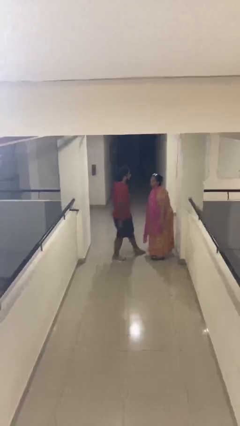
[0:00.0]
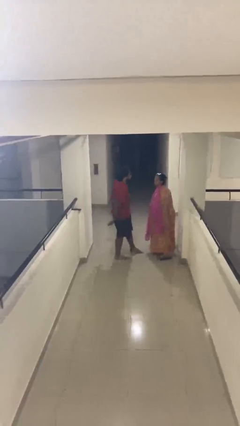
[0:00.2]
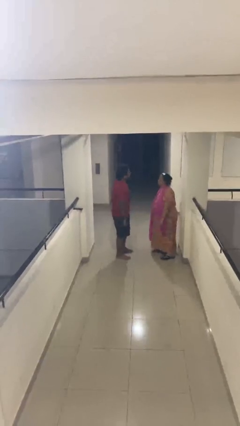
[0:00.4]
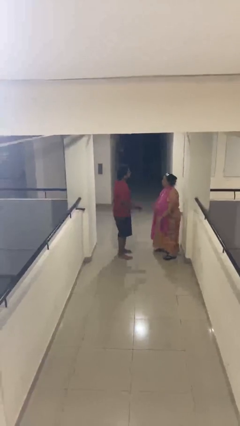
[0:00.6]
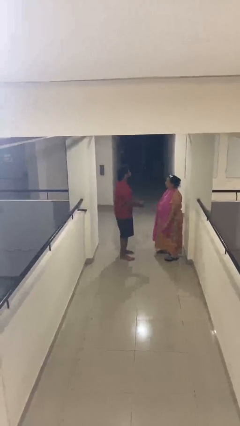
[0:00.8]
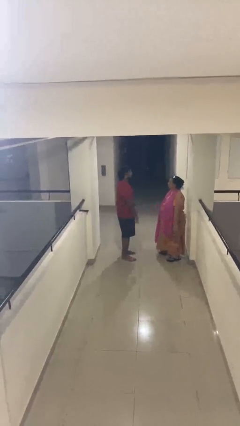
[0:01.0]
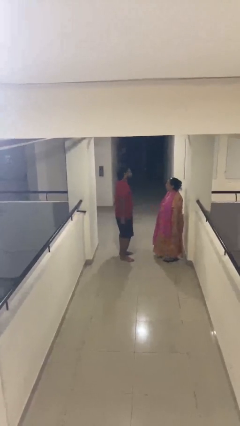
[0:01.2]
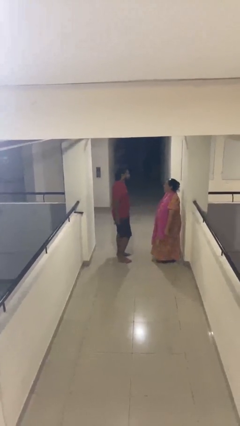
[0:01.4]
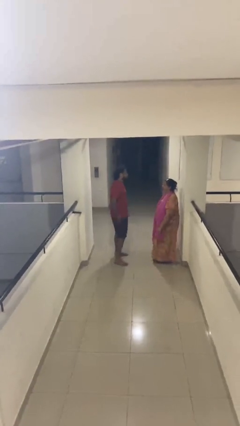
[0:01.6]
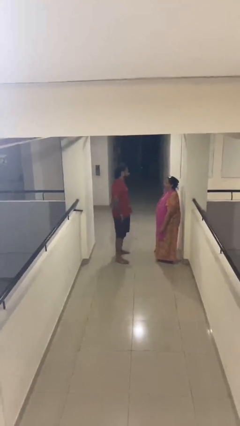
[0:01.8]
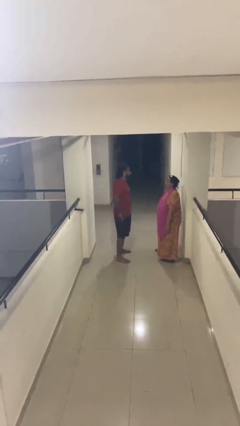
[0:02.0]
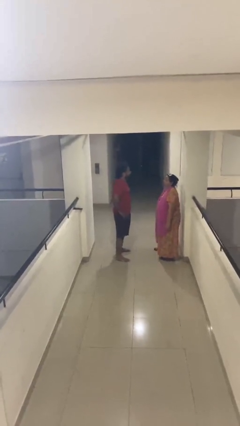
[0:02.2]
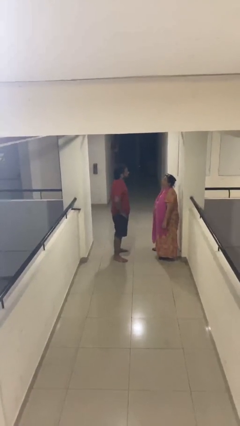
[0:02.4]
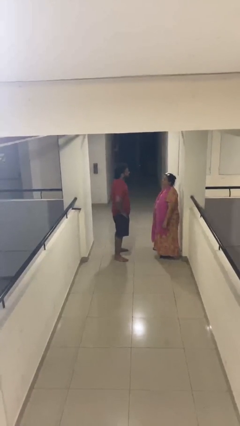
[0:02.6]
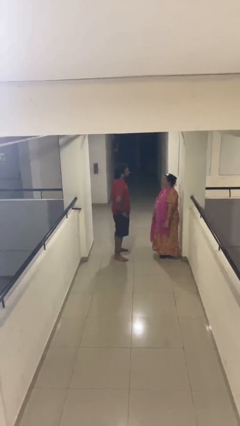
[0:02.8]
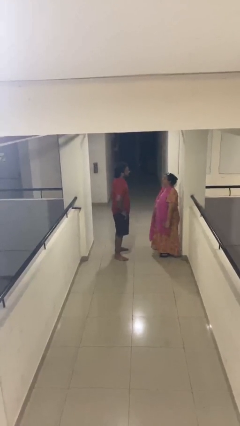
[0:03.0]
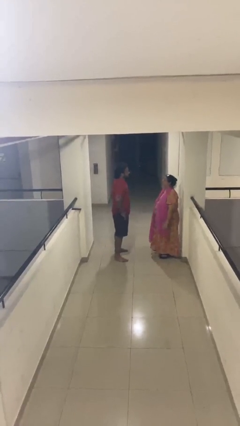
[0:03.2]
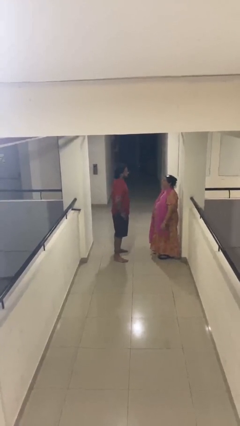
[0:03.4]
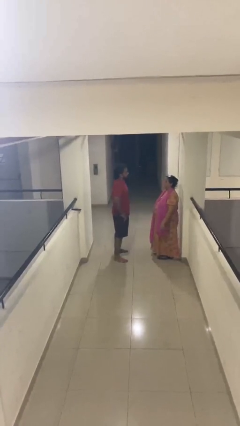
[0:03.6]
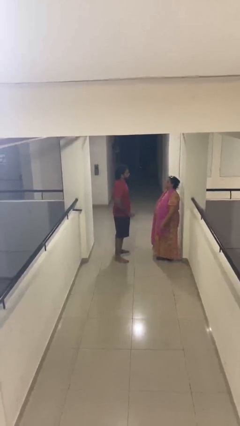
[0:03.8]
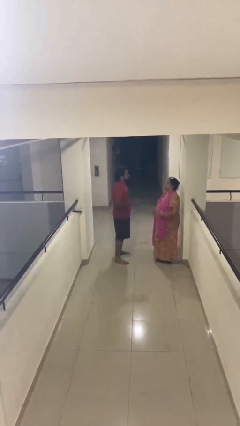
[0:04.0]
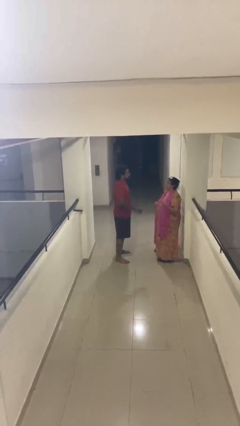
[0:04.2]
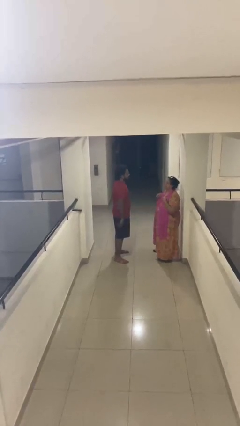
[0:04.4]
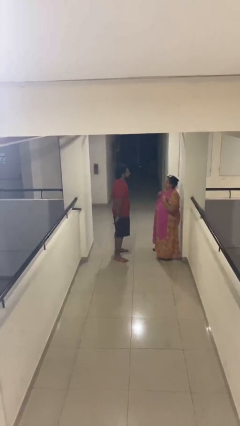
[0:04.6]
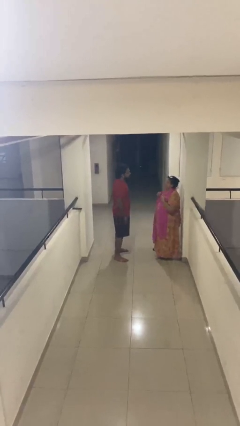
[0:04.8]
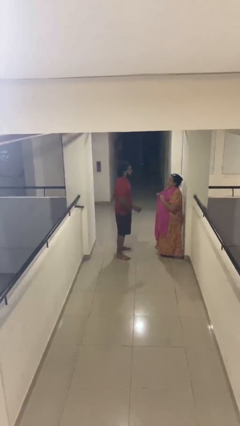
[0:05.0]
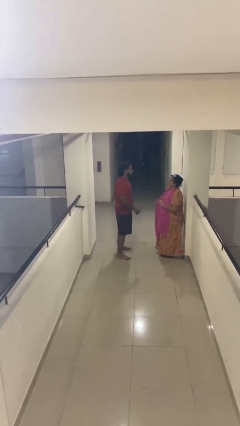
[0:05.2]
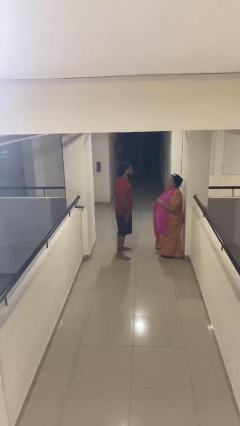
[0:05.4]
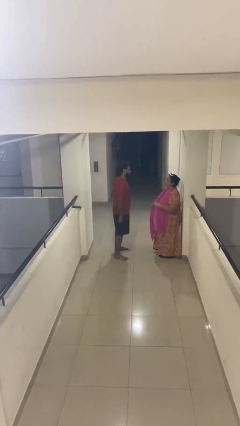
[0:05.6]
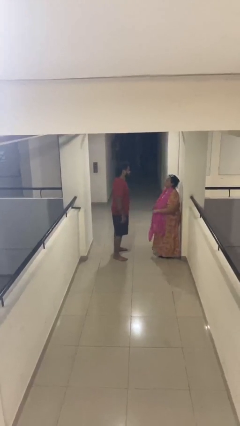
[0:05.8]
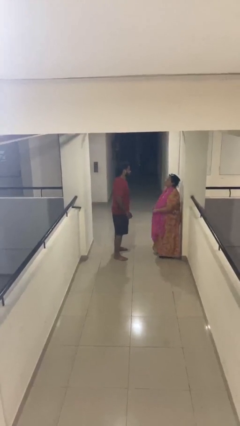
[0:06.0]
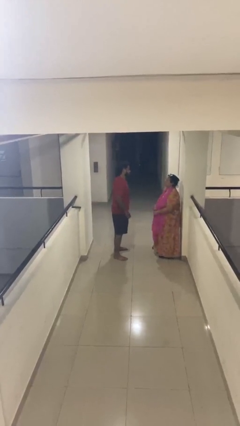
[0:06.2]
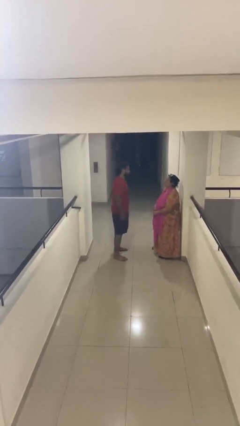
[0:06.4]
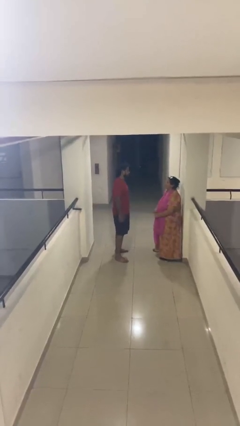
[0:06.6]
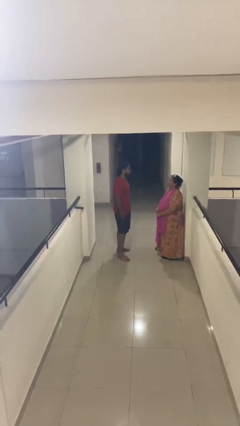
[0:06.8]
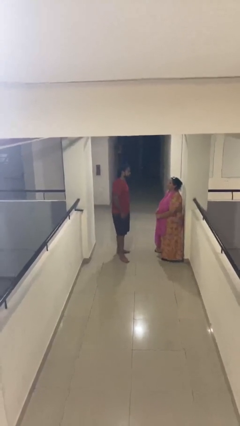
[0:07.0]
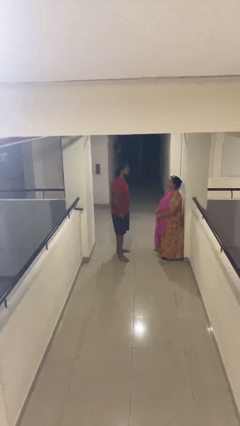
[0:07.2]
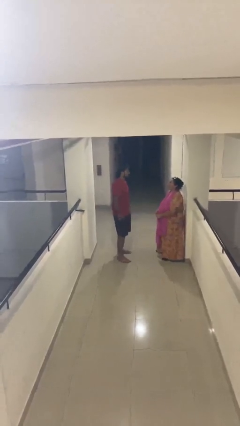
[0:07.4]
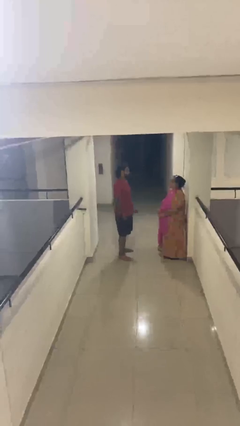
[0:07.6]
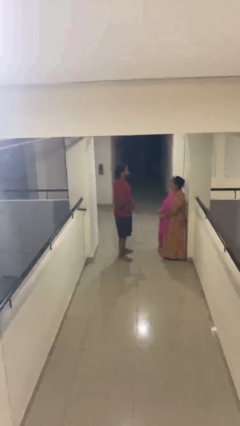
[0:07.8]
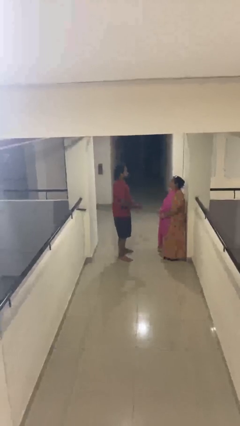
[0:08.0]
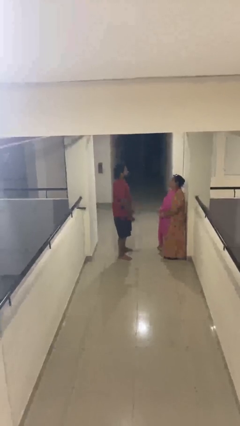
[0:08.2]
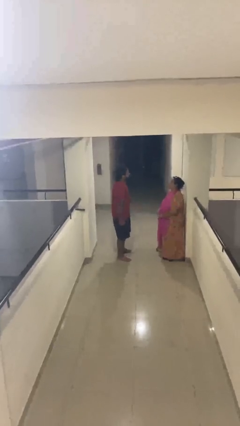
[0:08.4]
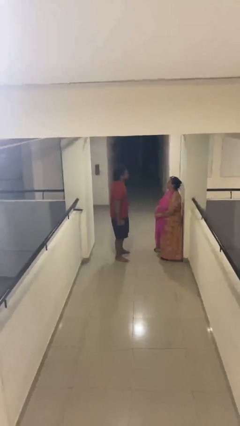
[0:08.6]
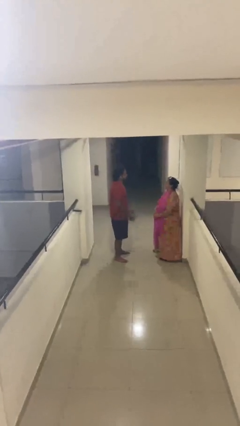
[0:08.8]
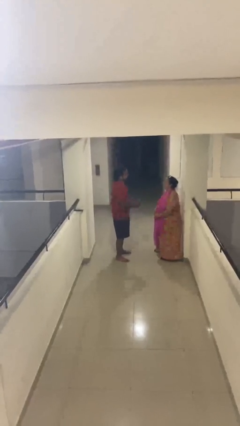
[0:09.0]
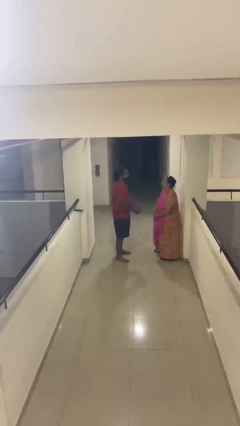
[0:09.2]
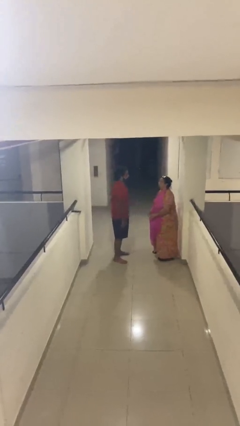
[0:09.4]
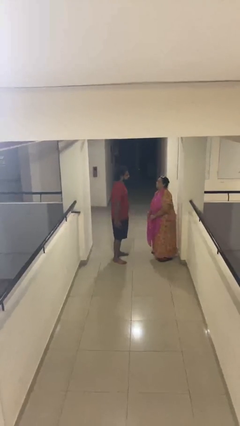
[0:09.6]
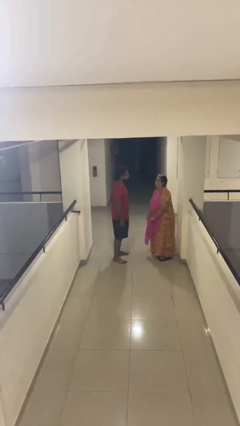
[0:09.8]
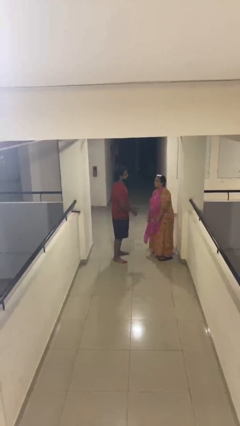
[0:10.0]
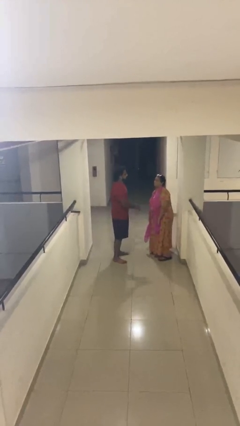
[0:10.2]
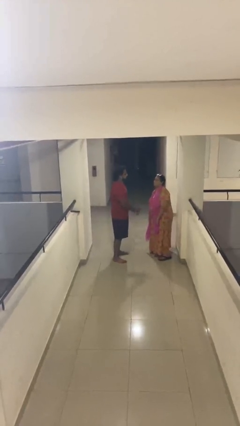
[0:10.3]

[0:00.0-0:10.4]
person talks to person

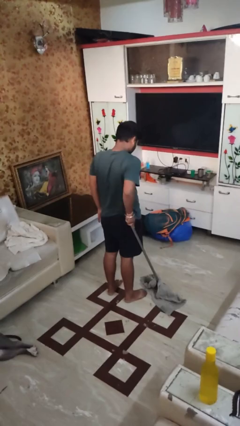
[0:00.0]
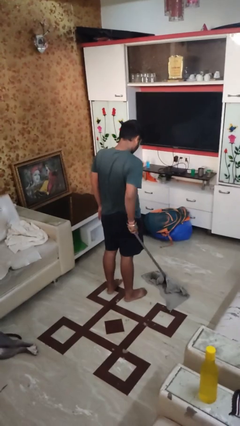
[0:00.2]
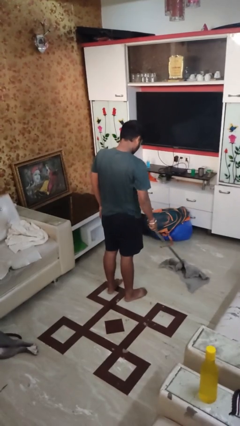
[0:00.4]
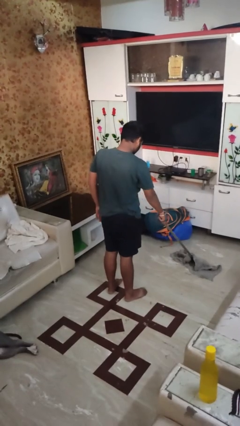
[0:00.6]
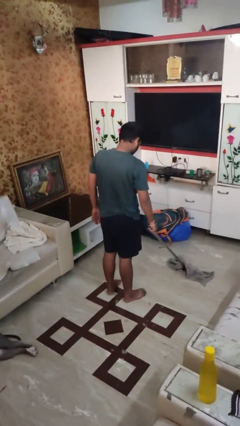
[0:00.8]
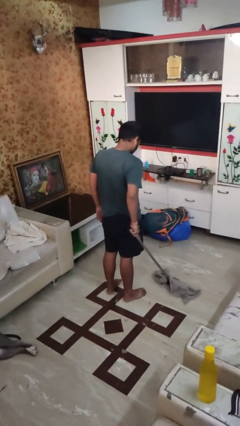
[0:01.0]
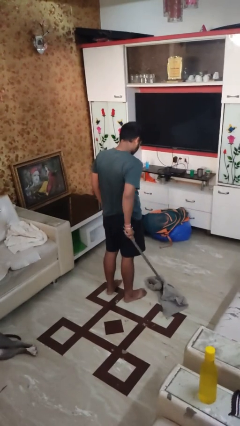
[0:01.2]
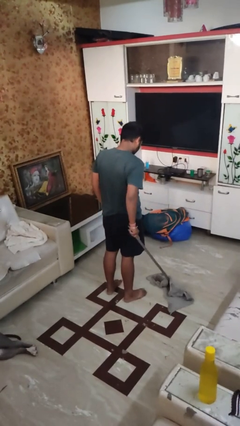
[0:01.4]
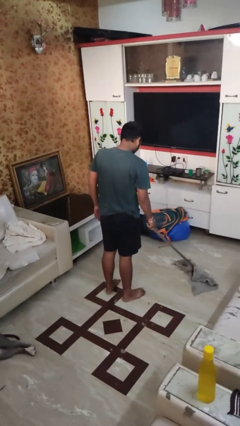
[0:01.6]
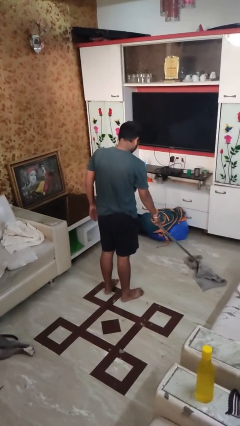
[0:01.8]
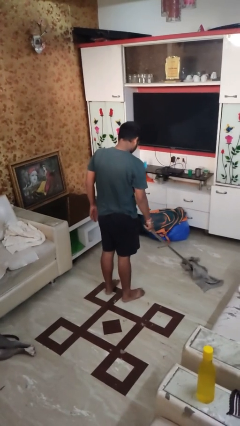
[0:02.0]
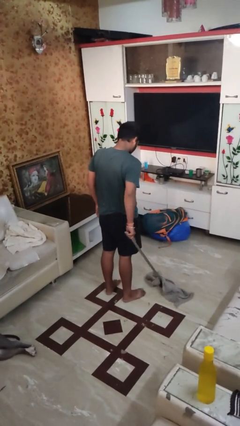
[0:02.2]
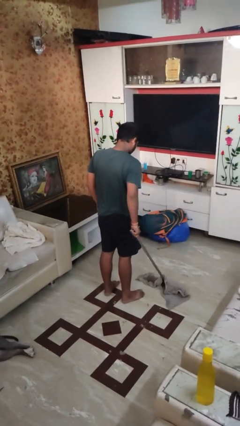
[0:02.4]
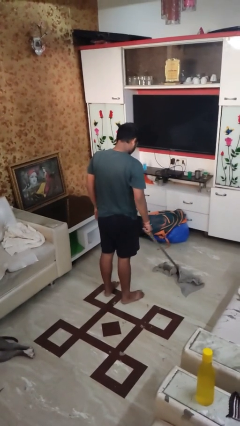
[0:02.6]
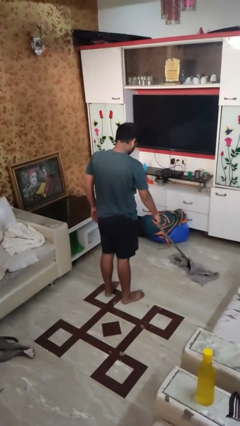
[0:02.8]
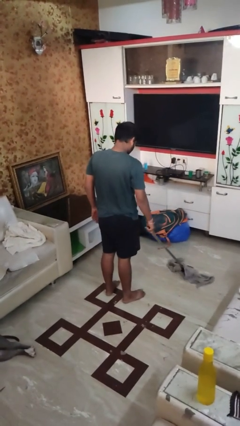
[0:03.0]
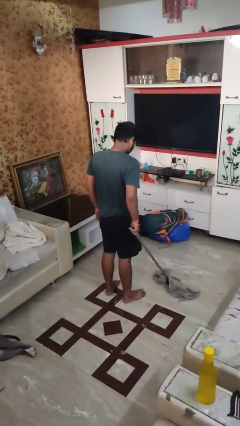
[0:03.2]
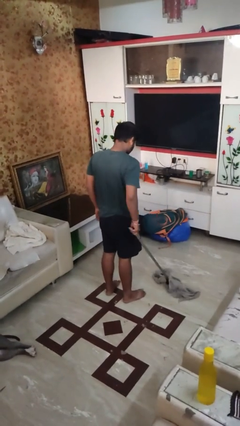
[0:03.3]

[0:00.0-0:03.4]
person mops

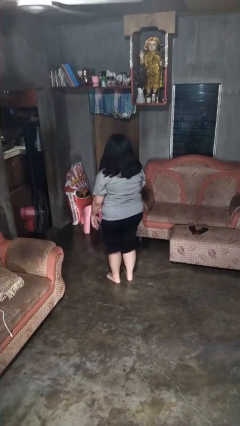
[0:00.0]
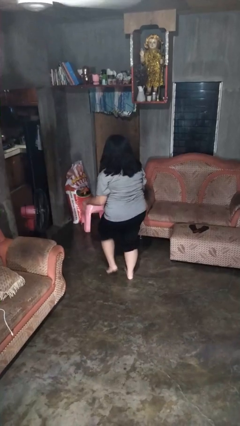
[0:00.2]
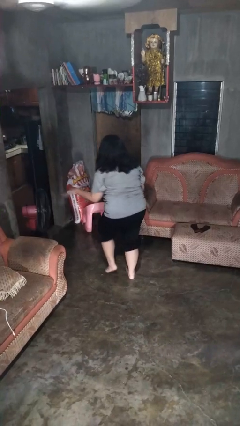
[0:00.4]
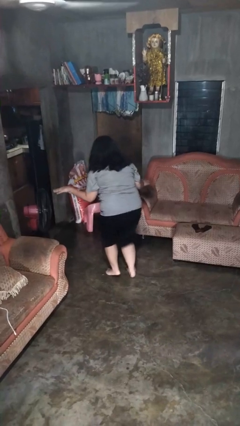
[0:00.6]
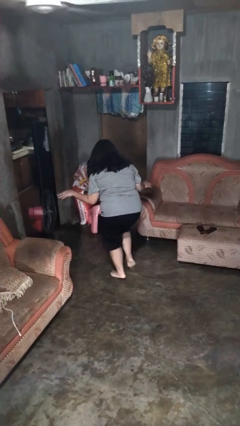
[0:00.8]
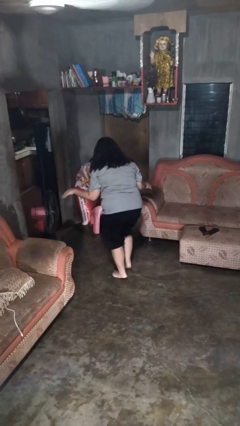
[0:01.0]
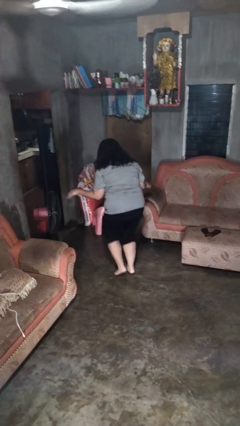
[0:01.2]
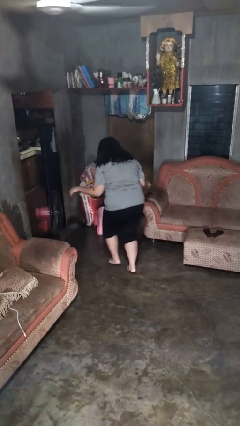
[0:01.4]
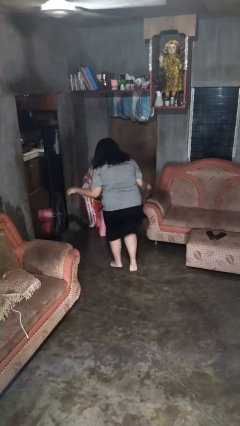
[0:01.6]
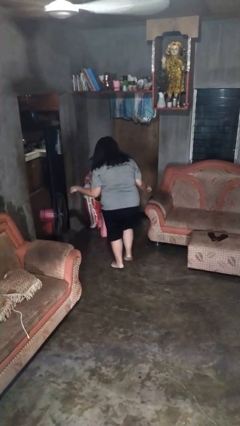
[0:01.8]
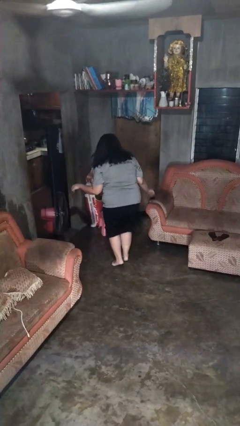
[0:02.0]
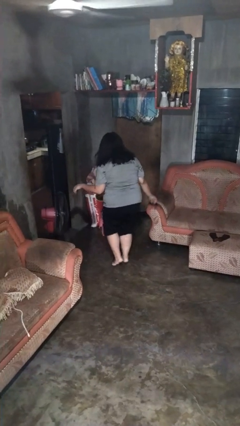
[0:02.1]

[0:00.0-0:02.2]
person walks tiptoe

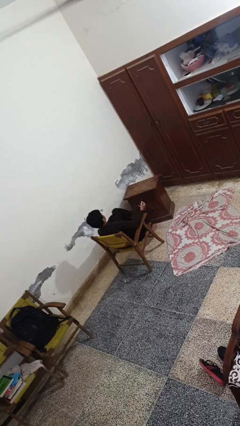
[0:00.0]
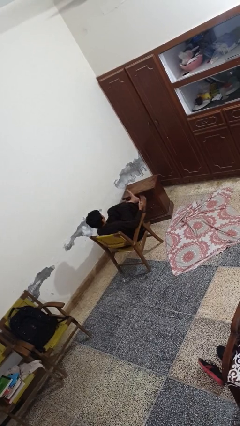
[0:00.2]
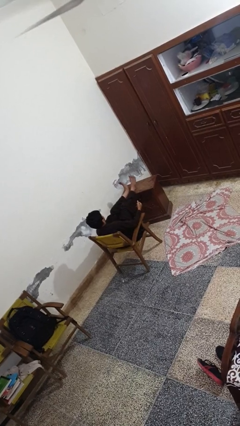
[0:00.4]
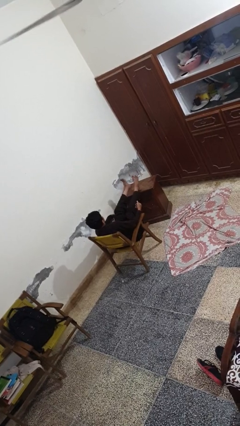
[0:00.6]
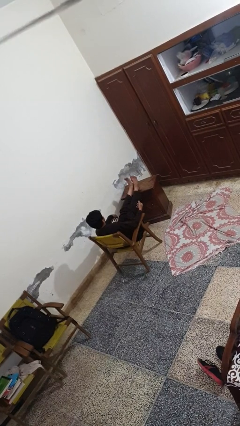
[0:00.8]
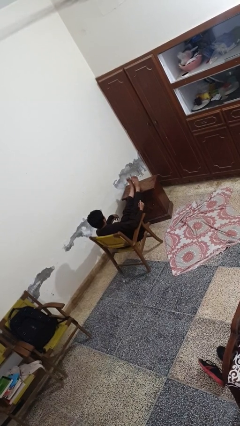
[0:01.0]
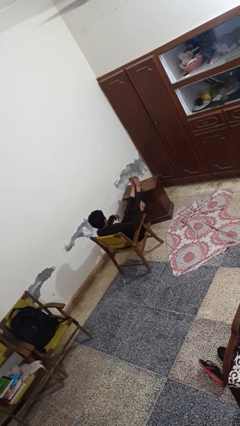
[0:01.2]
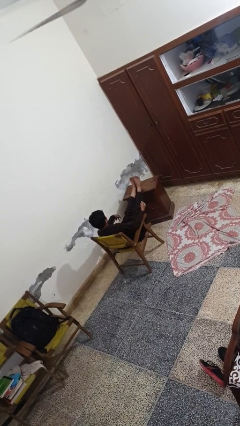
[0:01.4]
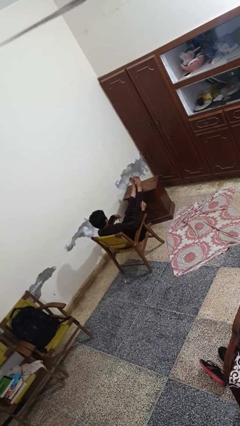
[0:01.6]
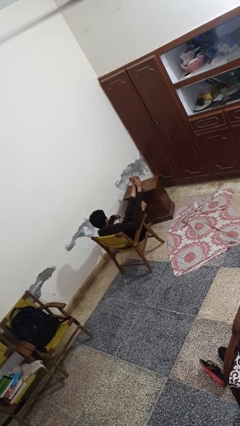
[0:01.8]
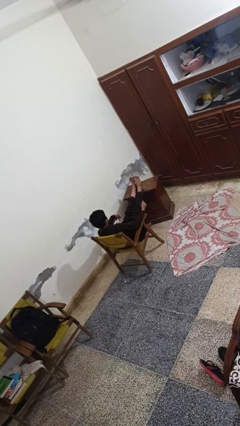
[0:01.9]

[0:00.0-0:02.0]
person puts feet up
